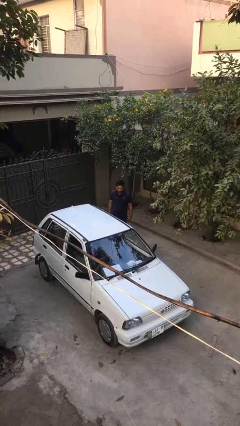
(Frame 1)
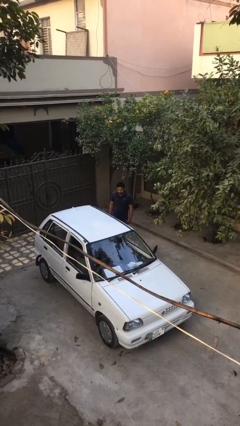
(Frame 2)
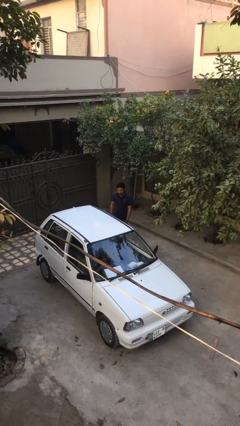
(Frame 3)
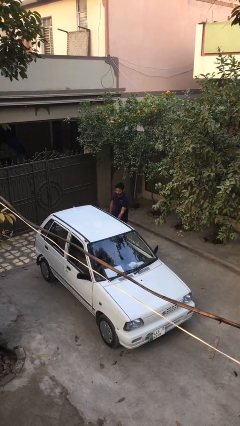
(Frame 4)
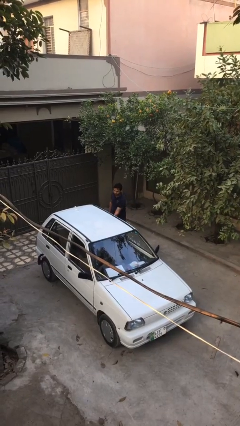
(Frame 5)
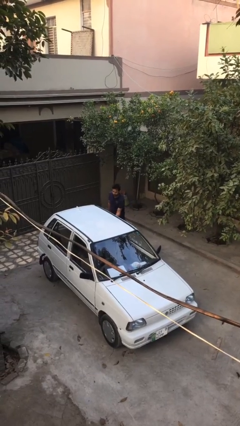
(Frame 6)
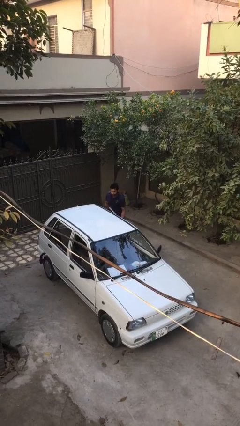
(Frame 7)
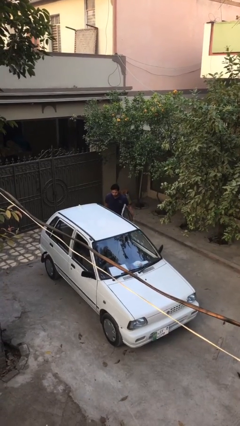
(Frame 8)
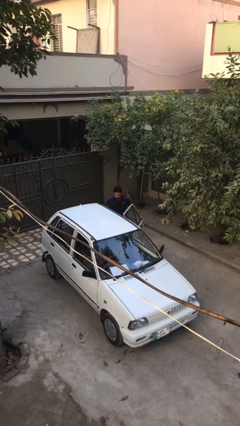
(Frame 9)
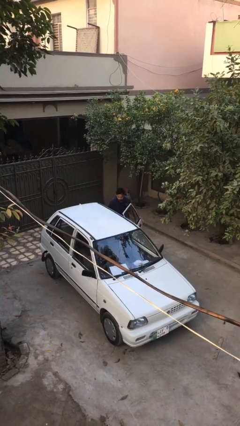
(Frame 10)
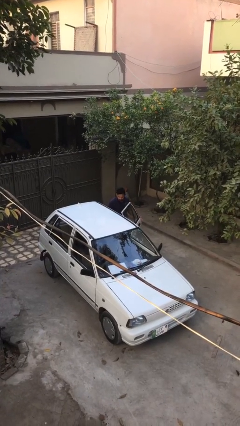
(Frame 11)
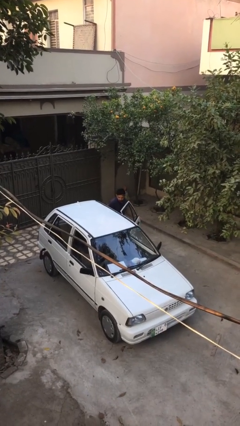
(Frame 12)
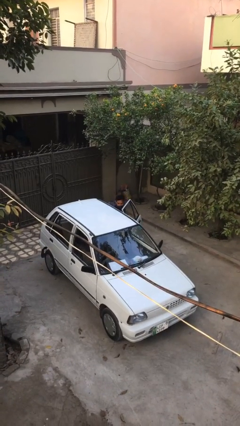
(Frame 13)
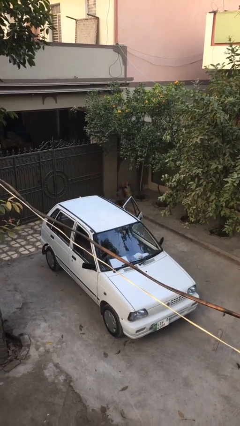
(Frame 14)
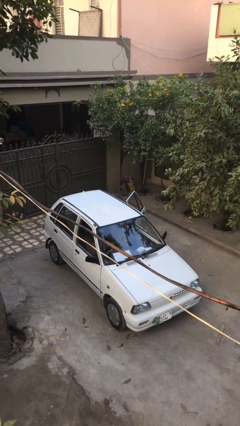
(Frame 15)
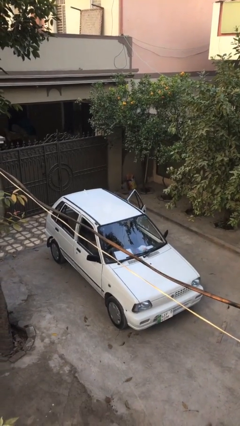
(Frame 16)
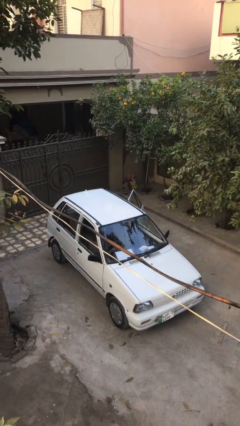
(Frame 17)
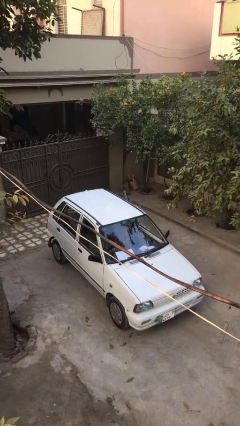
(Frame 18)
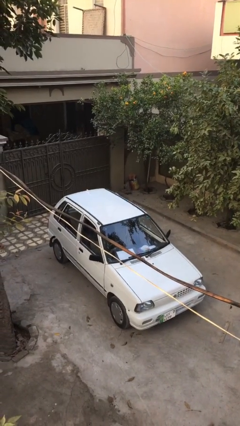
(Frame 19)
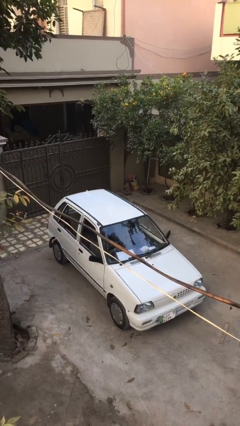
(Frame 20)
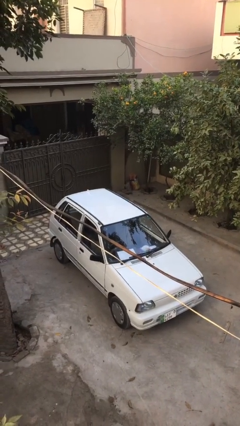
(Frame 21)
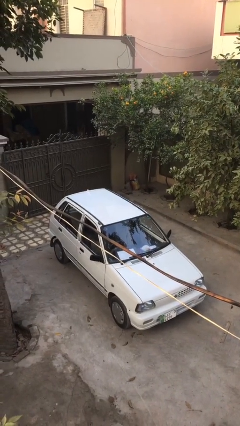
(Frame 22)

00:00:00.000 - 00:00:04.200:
person enters car

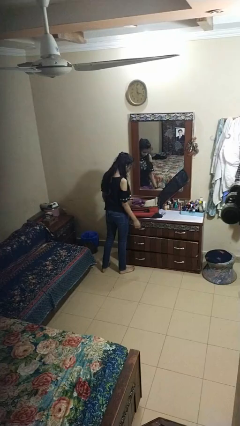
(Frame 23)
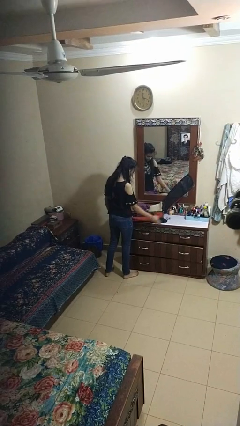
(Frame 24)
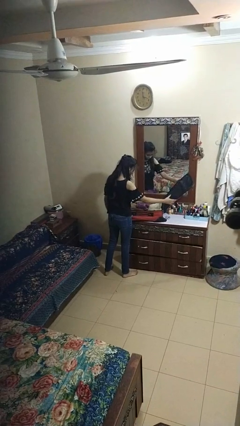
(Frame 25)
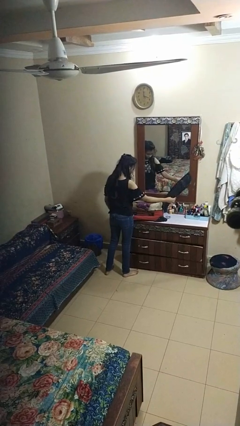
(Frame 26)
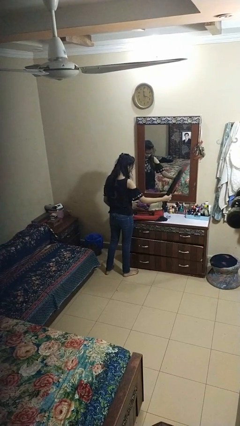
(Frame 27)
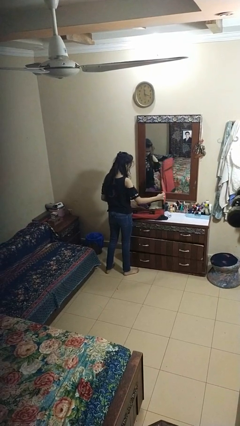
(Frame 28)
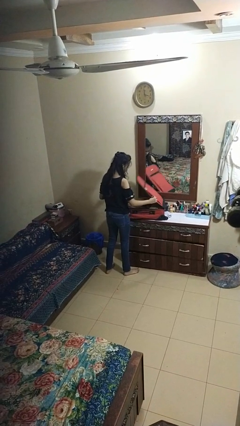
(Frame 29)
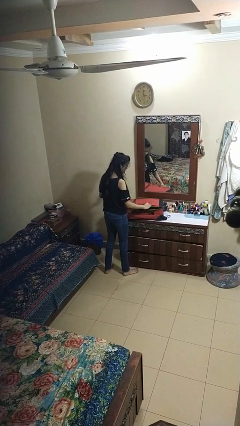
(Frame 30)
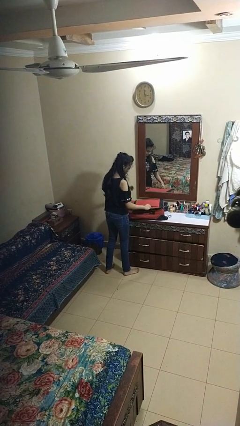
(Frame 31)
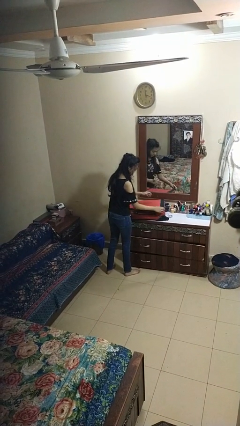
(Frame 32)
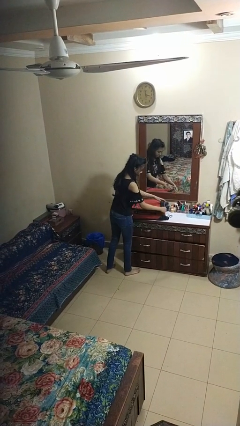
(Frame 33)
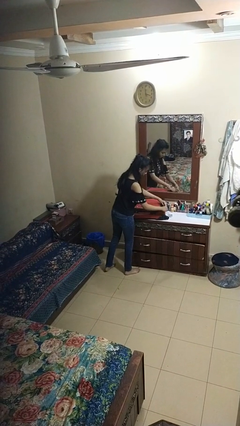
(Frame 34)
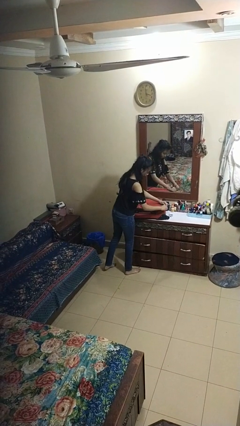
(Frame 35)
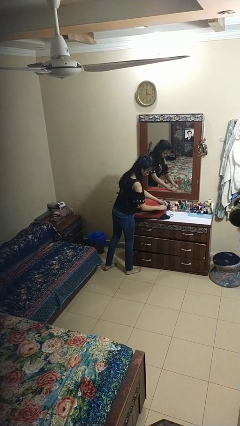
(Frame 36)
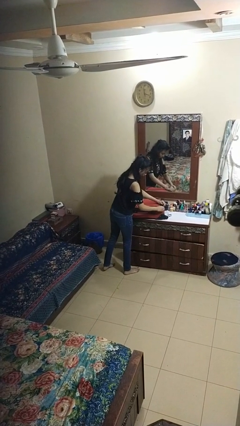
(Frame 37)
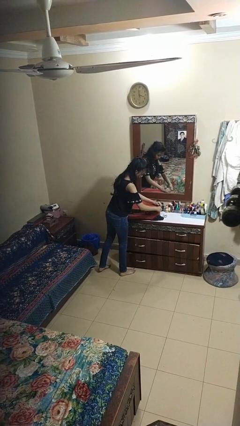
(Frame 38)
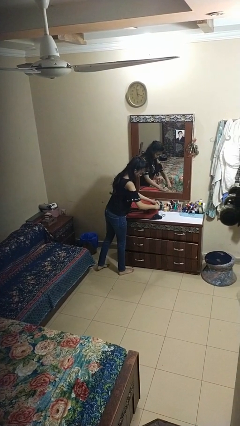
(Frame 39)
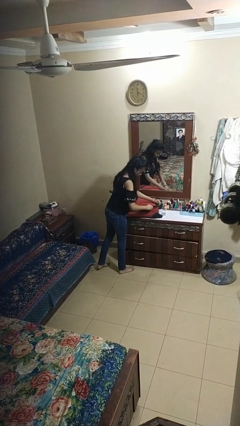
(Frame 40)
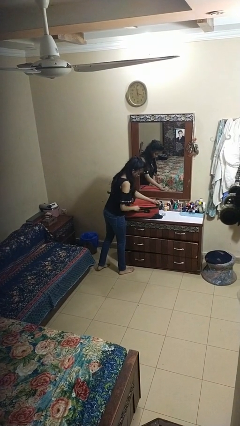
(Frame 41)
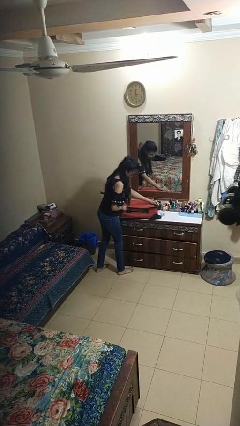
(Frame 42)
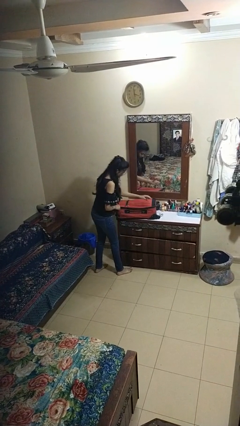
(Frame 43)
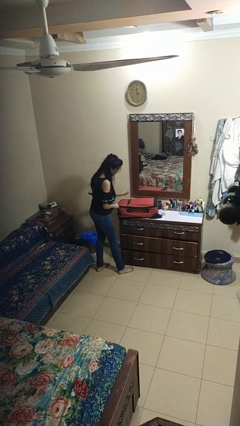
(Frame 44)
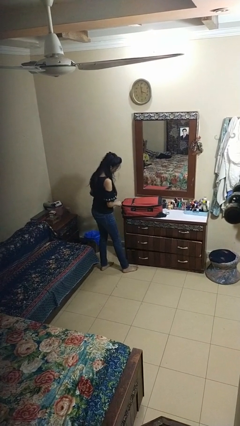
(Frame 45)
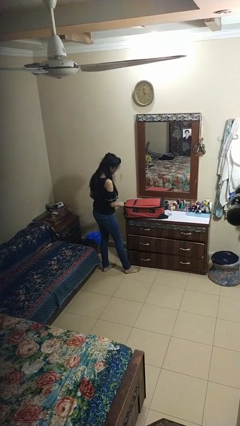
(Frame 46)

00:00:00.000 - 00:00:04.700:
person closes suitcase

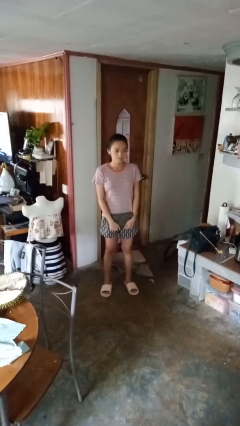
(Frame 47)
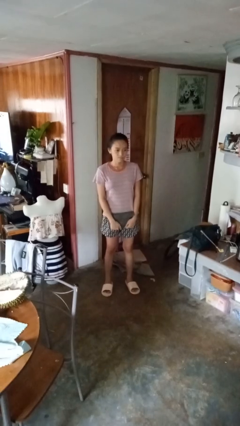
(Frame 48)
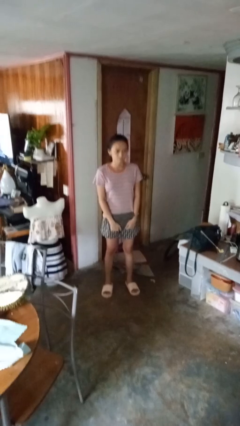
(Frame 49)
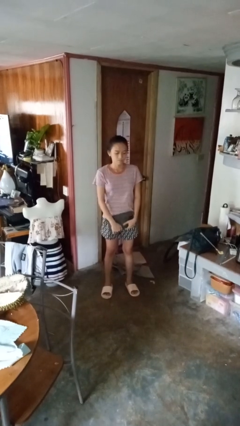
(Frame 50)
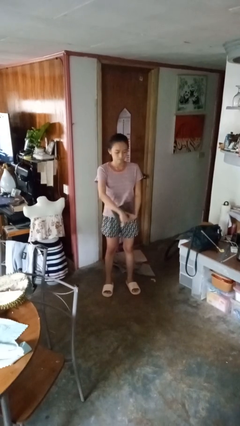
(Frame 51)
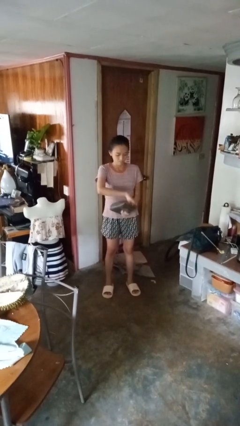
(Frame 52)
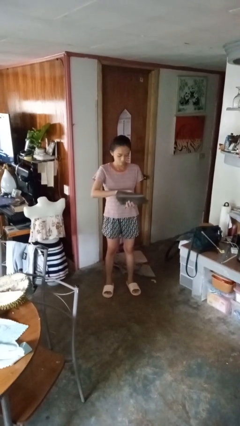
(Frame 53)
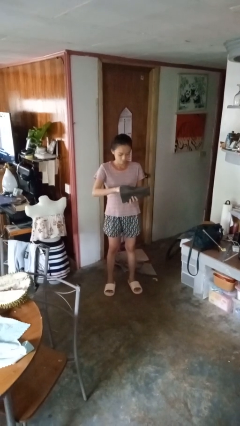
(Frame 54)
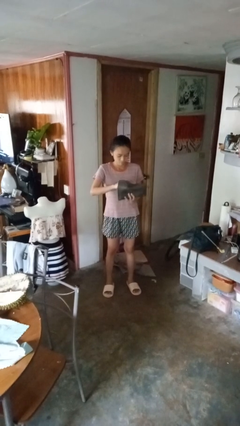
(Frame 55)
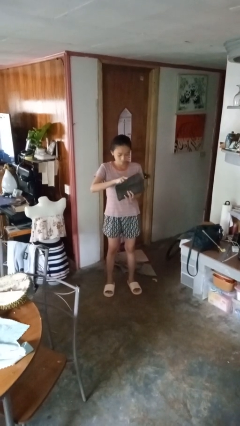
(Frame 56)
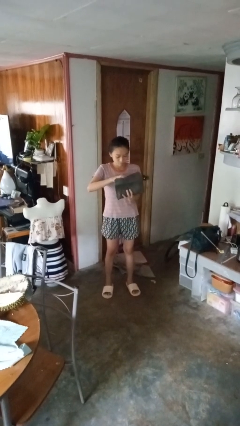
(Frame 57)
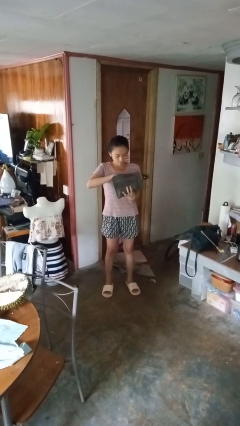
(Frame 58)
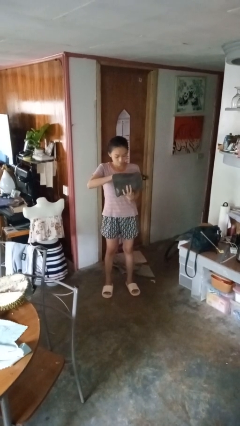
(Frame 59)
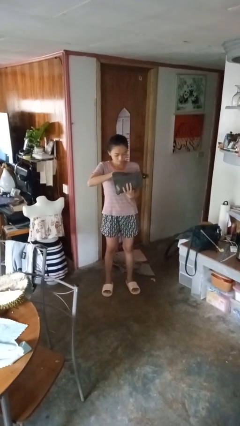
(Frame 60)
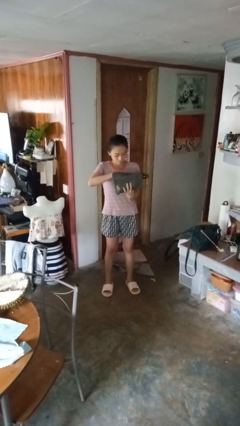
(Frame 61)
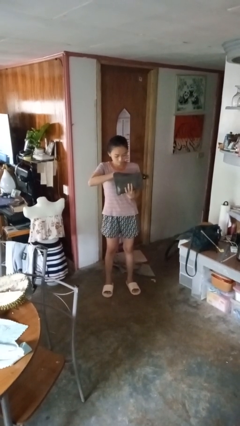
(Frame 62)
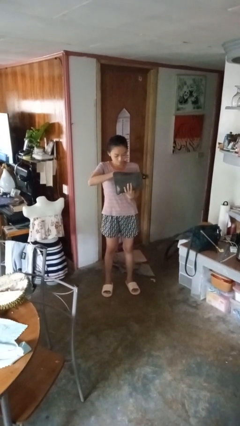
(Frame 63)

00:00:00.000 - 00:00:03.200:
person searches in purse

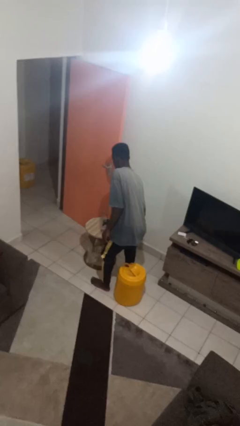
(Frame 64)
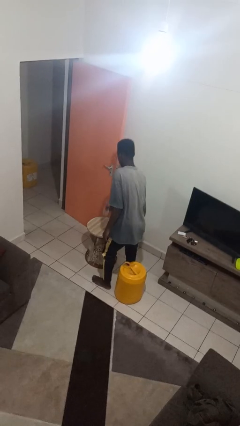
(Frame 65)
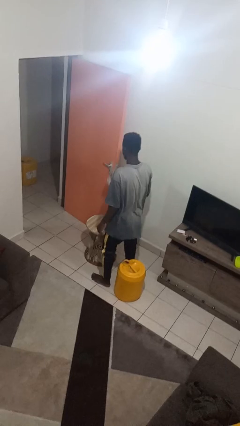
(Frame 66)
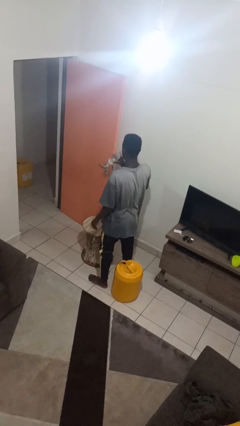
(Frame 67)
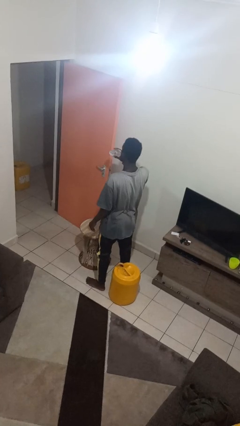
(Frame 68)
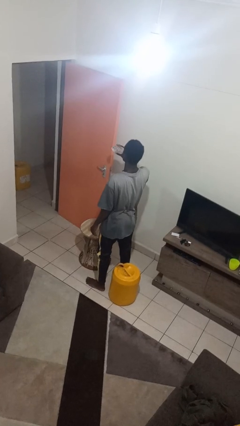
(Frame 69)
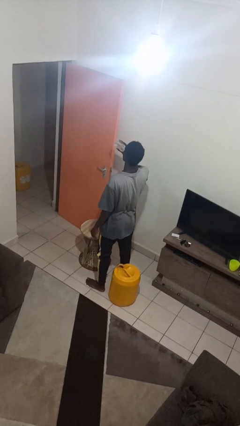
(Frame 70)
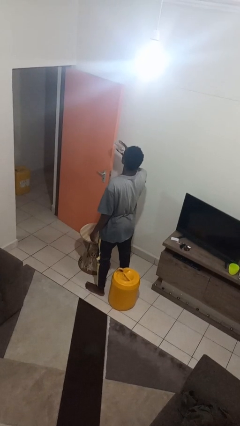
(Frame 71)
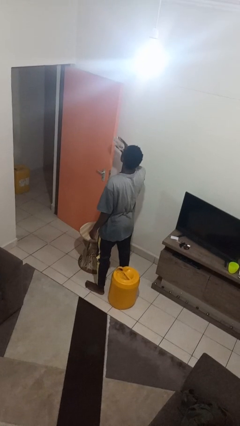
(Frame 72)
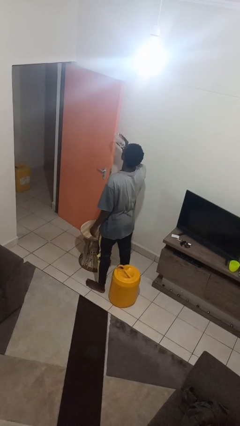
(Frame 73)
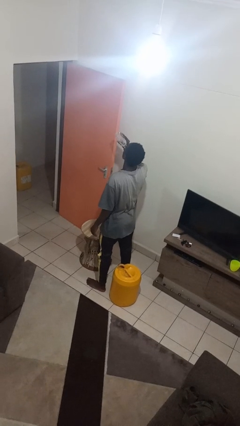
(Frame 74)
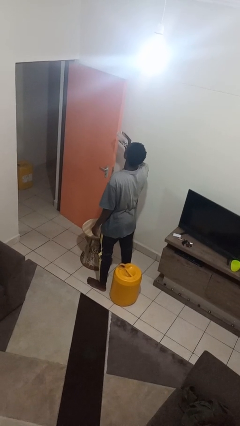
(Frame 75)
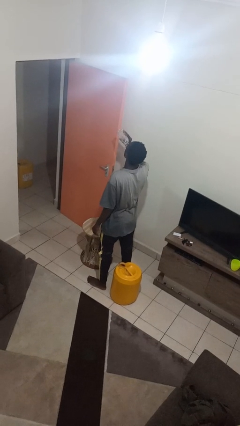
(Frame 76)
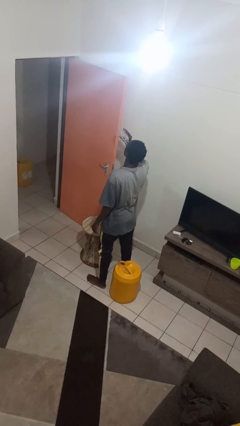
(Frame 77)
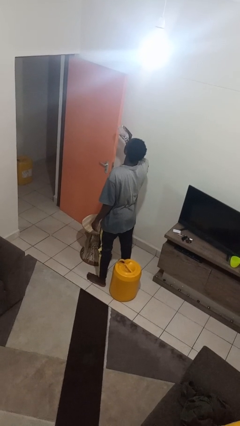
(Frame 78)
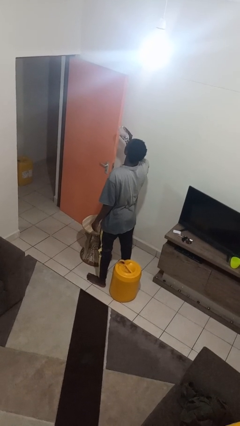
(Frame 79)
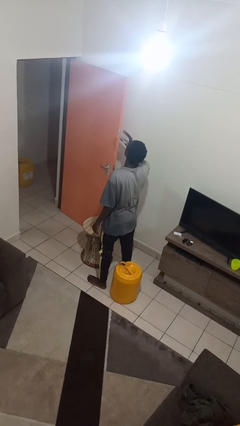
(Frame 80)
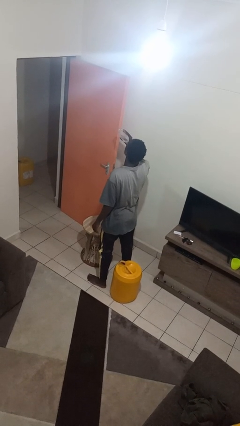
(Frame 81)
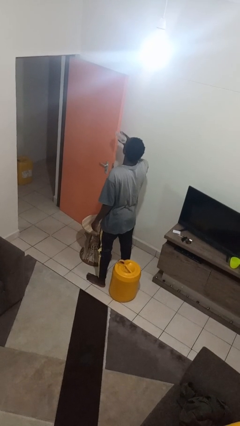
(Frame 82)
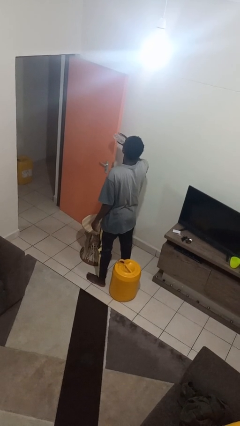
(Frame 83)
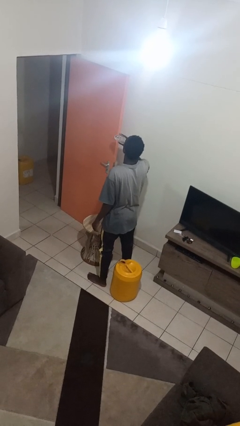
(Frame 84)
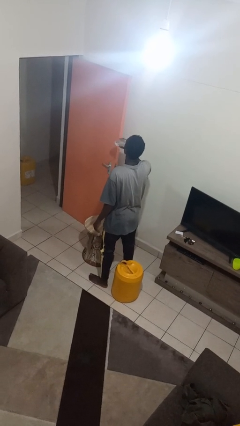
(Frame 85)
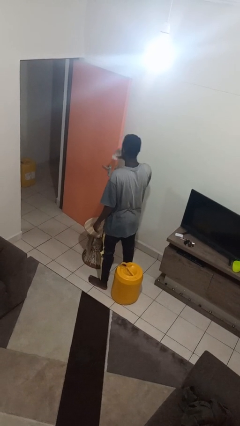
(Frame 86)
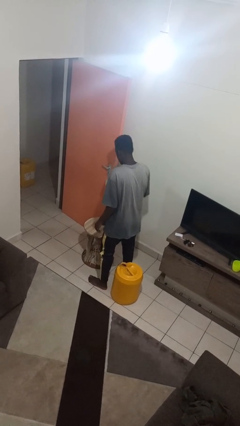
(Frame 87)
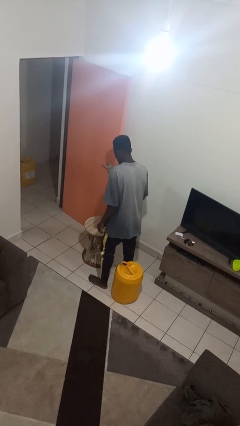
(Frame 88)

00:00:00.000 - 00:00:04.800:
person drinks from bottle

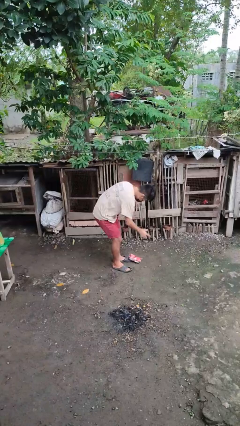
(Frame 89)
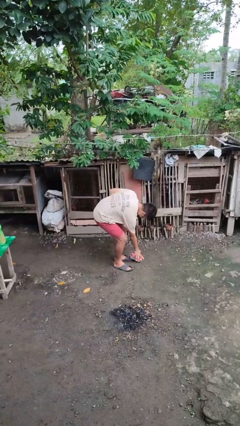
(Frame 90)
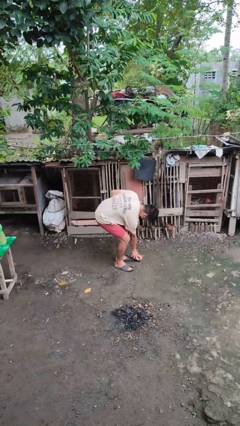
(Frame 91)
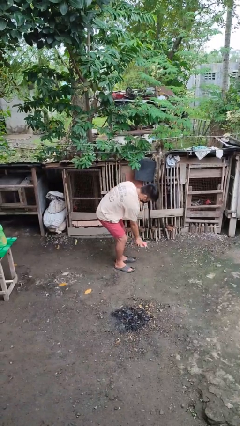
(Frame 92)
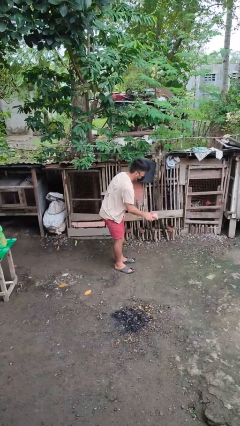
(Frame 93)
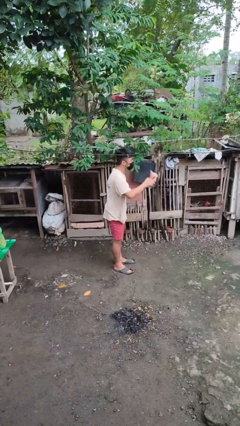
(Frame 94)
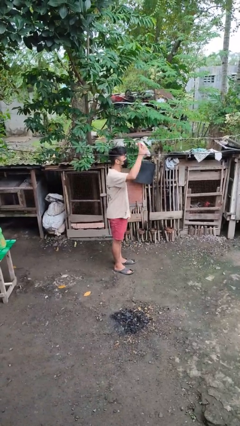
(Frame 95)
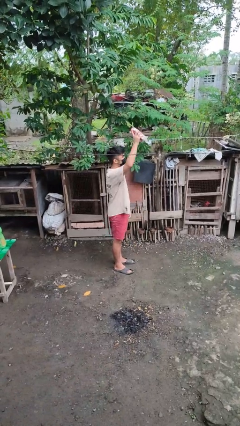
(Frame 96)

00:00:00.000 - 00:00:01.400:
person picks up object from floor
